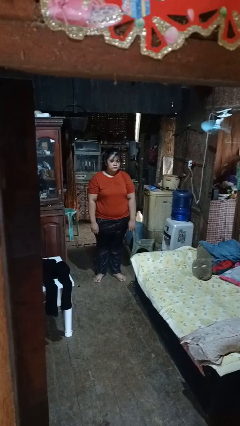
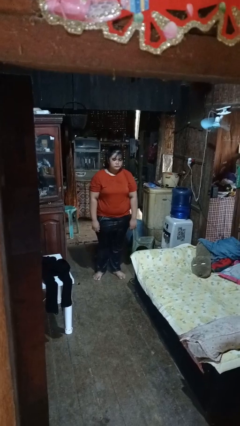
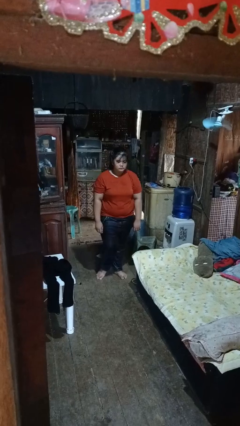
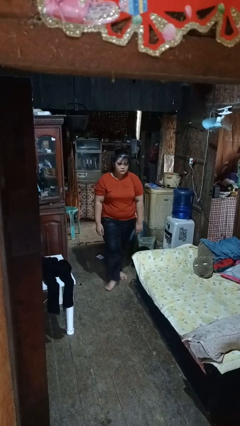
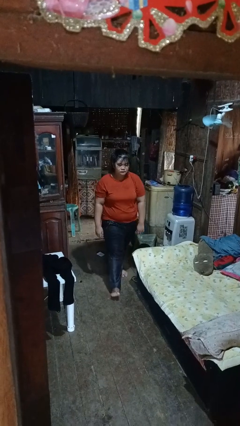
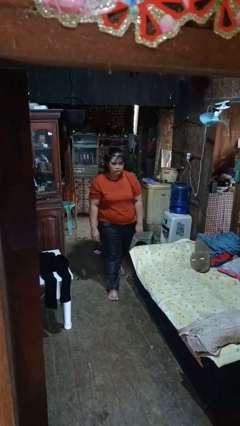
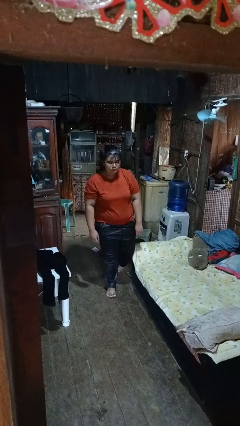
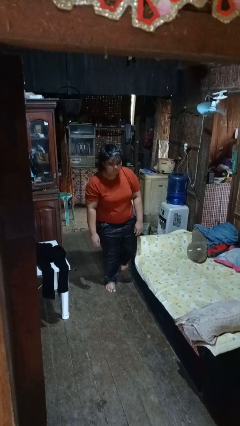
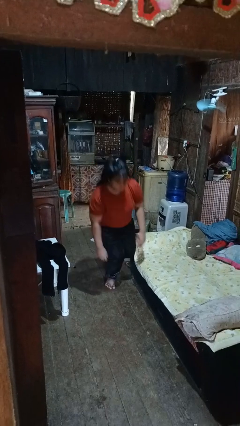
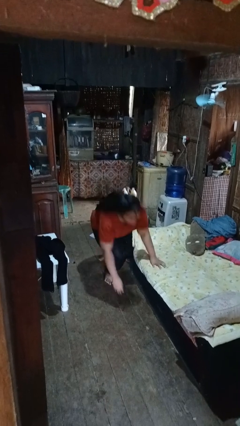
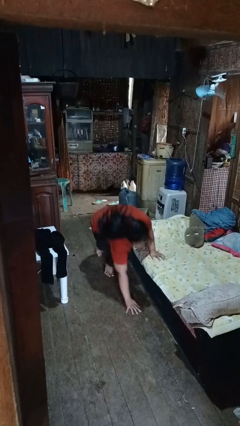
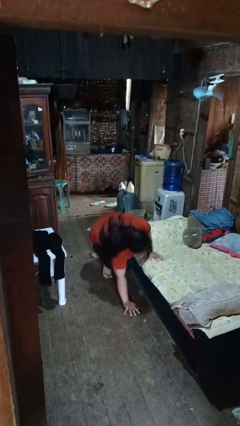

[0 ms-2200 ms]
person trips on object on floor

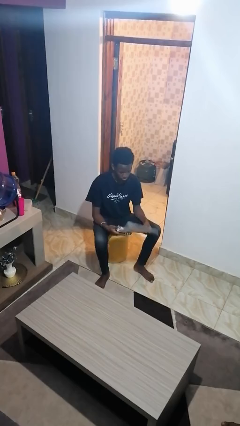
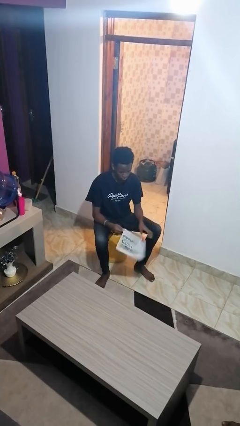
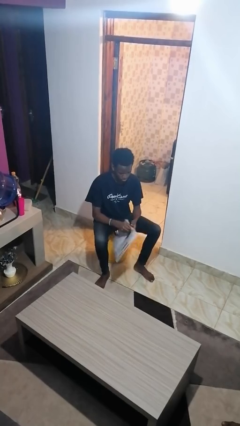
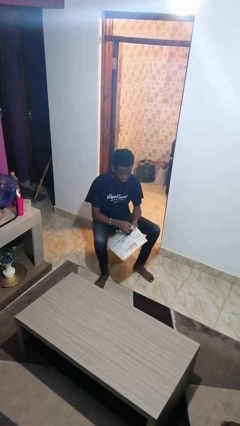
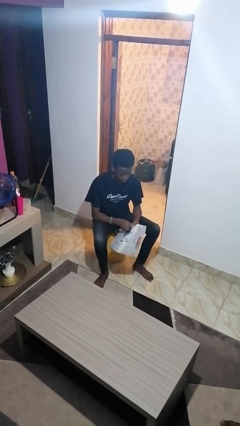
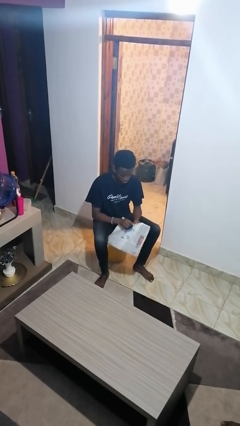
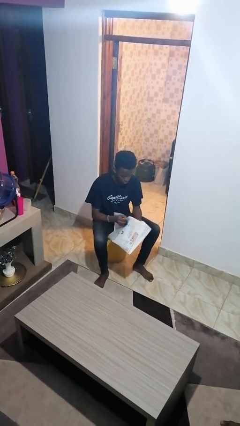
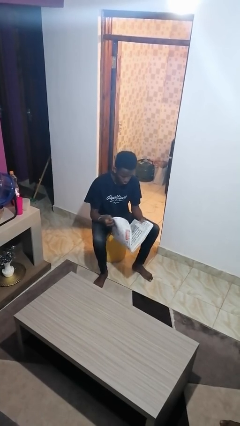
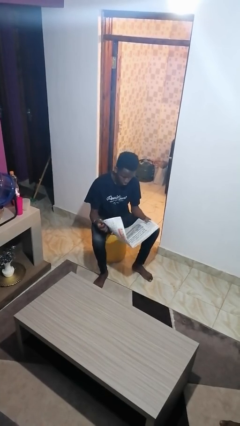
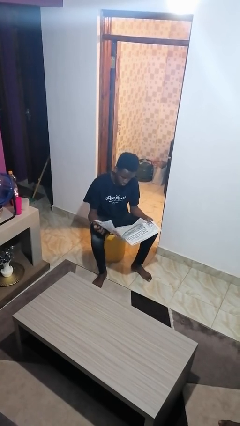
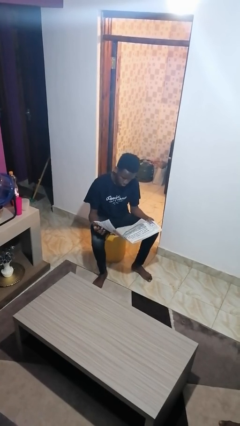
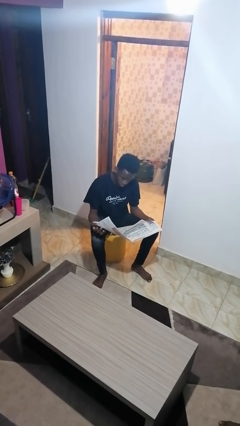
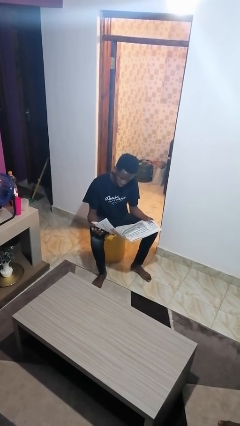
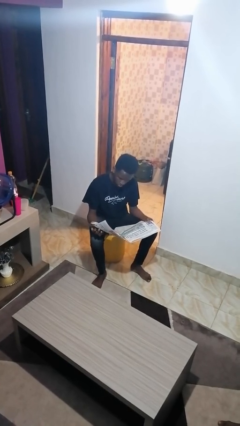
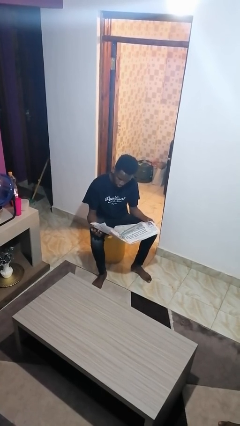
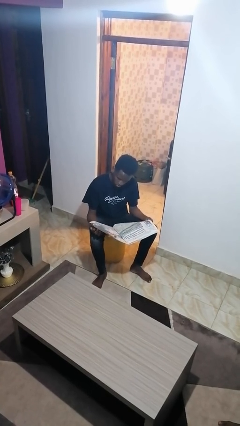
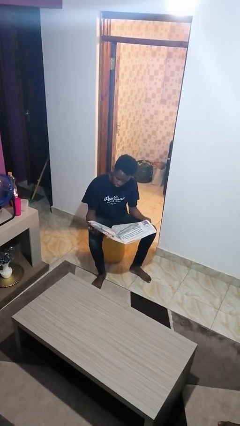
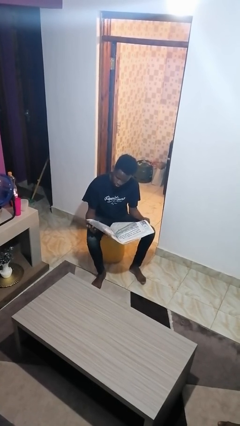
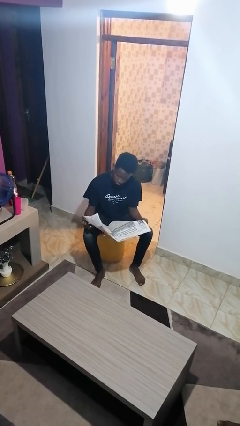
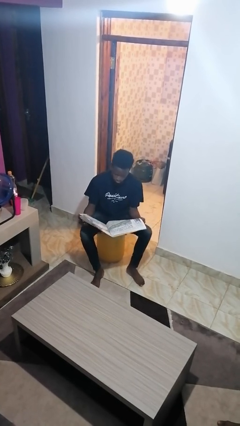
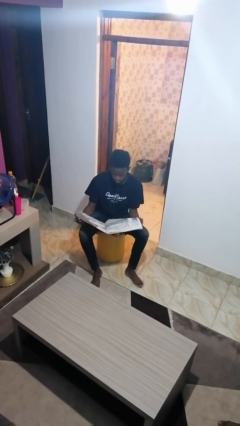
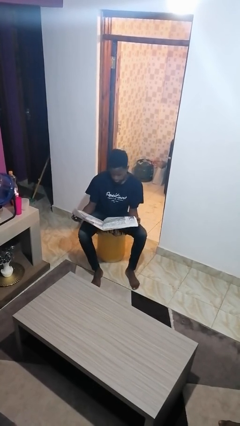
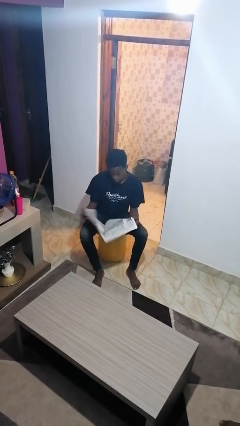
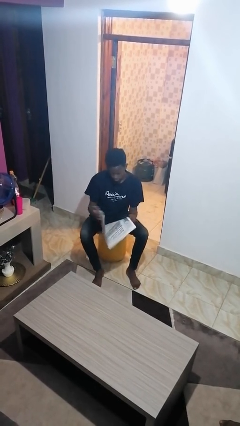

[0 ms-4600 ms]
person reads newspaper

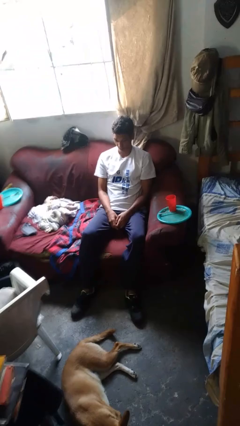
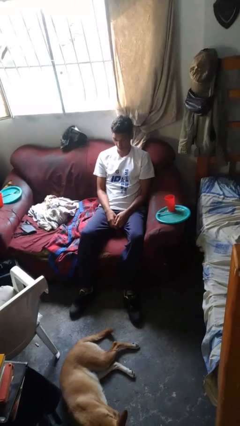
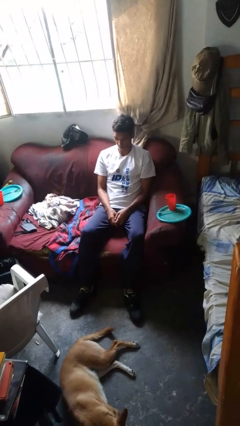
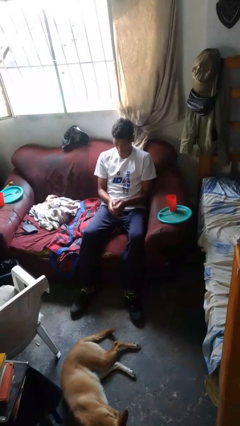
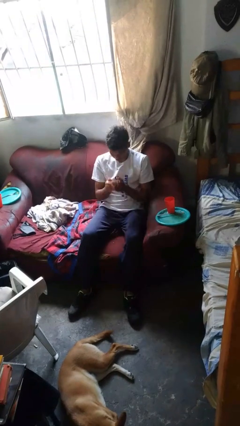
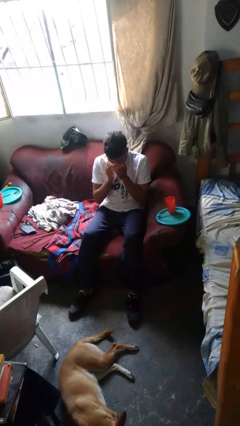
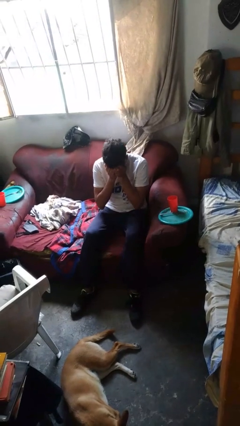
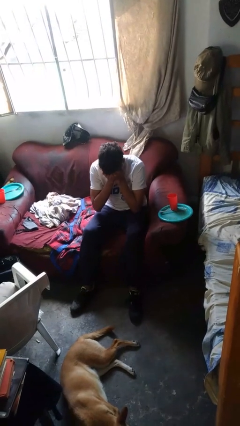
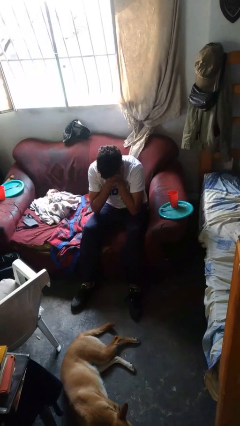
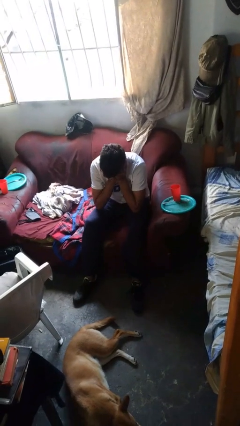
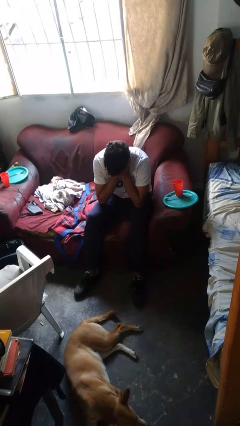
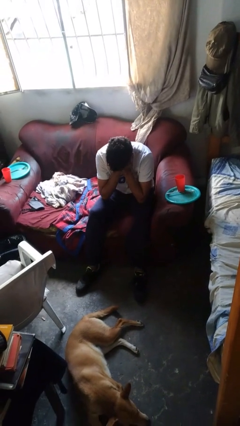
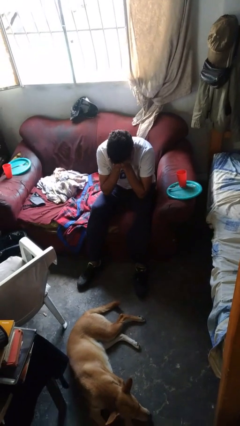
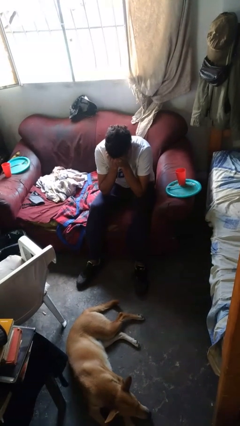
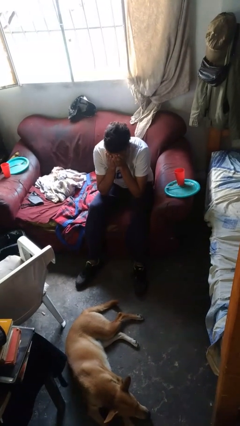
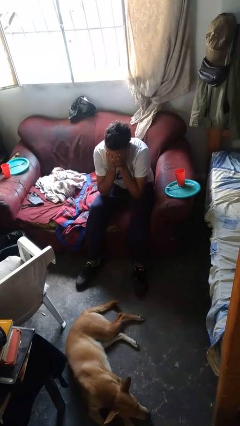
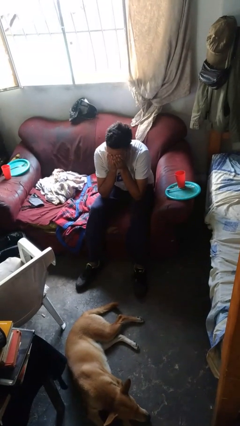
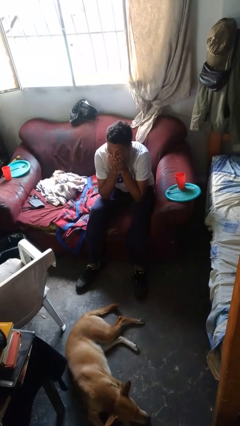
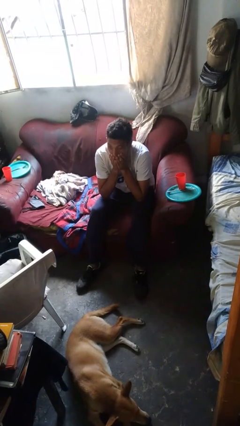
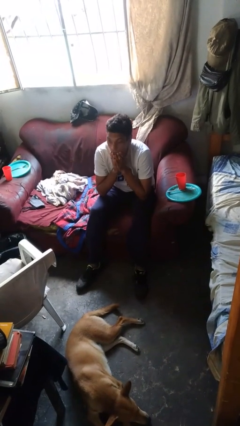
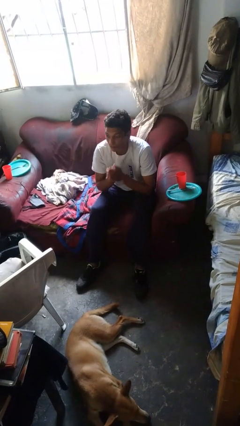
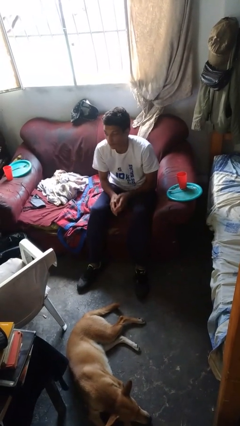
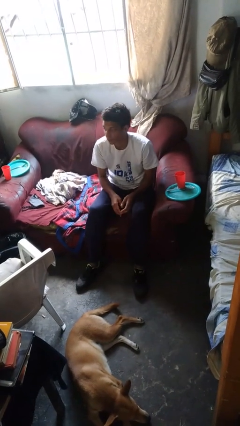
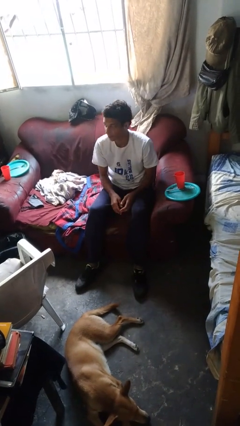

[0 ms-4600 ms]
person covers face with hands

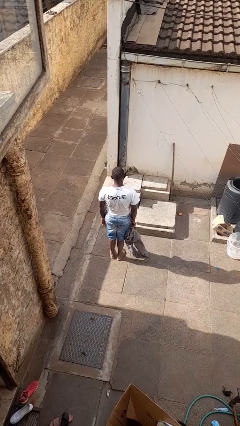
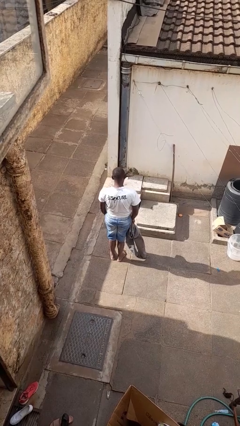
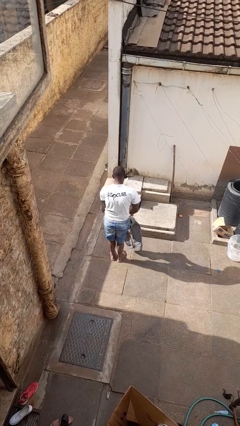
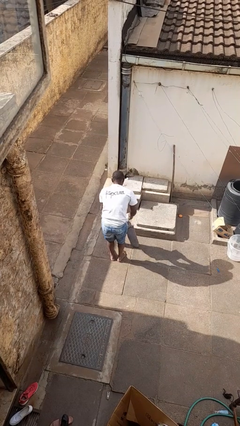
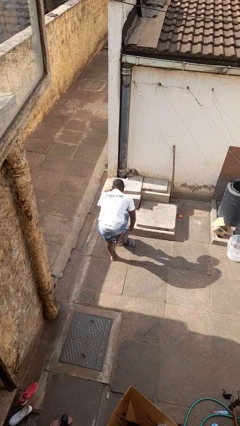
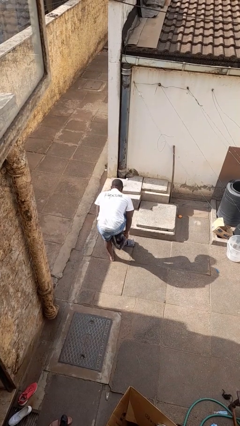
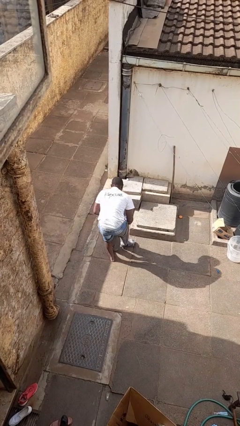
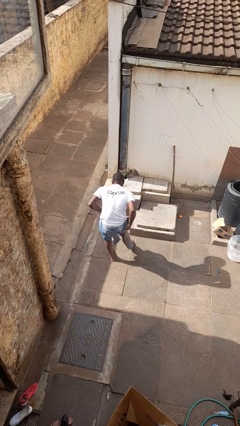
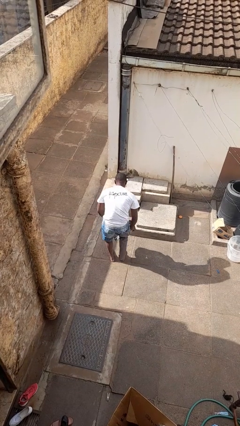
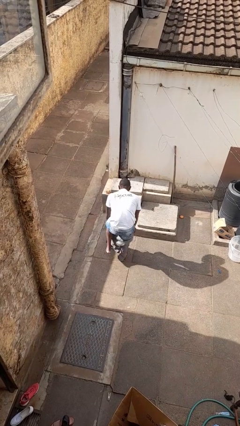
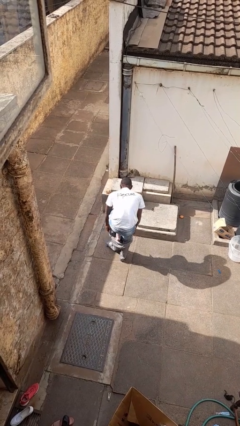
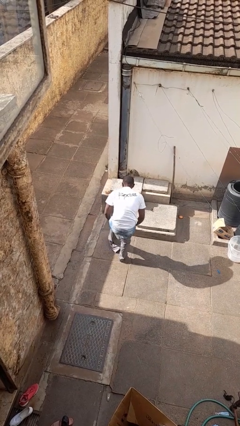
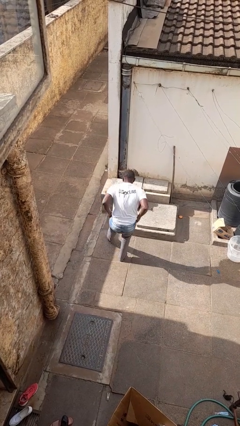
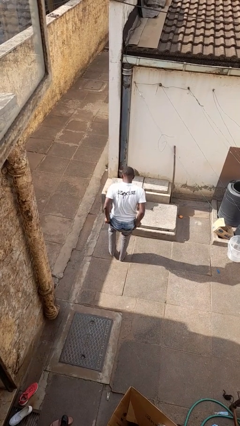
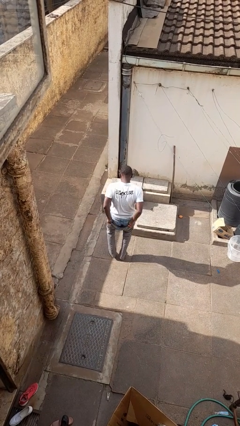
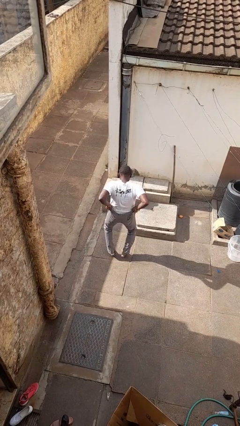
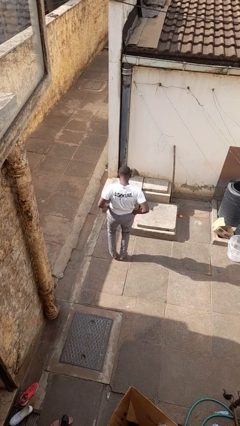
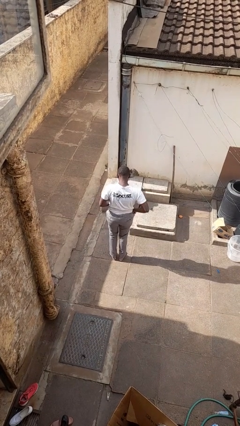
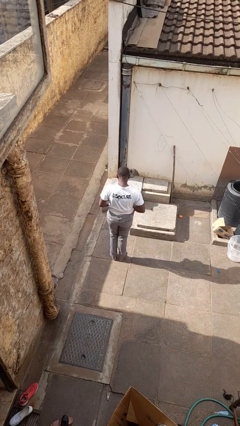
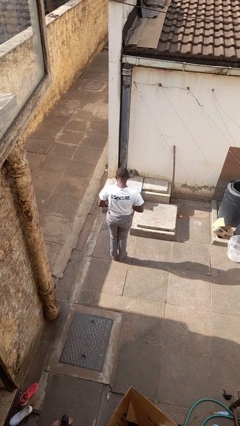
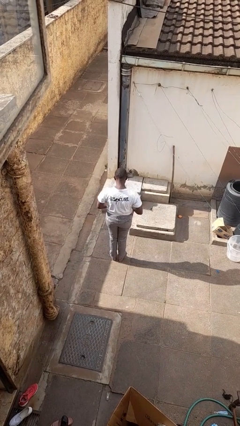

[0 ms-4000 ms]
person puts on pants

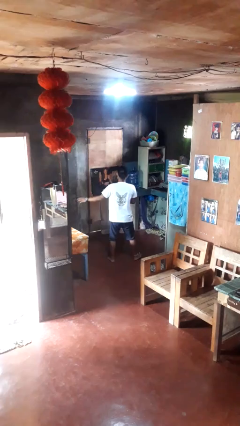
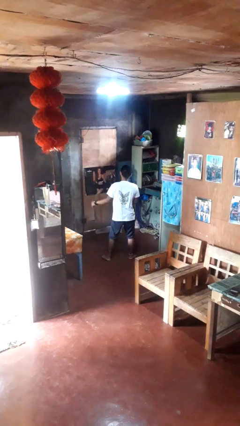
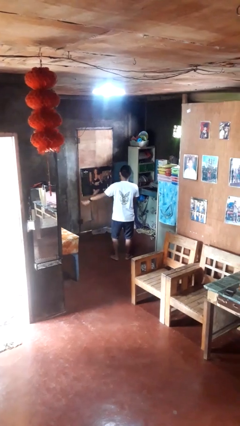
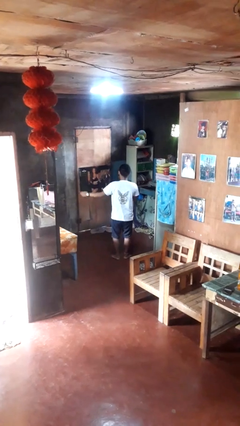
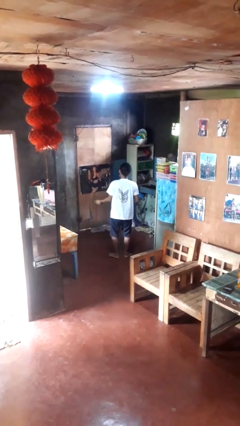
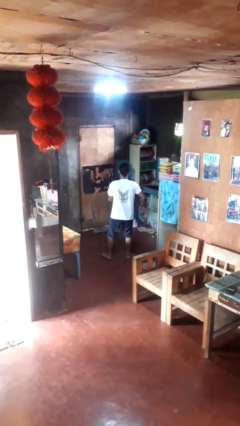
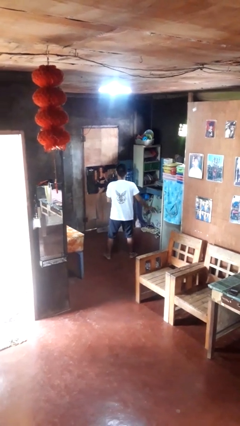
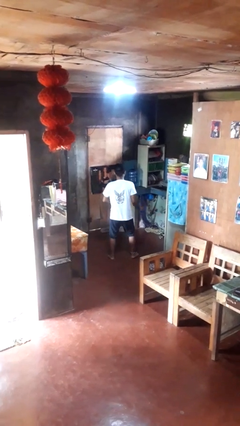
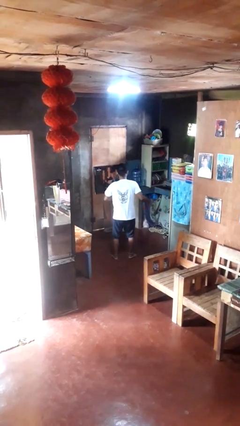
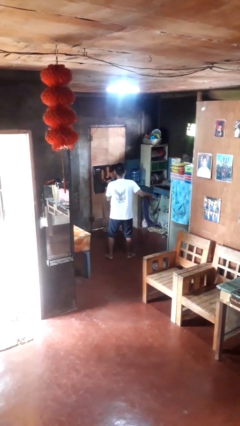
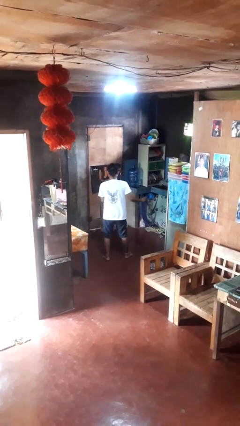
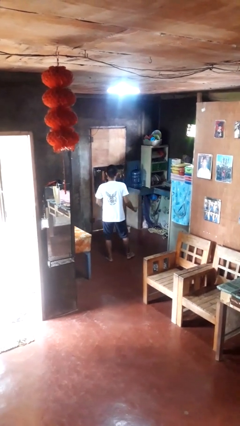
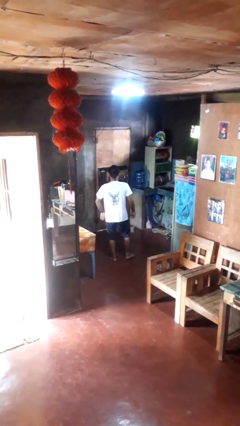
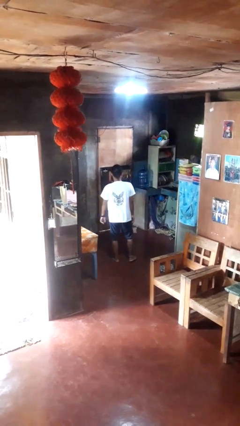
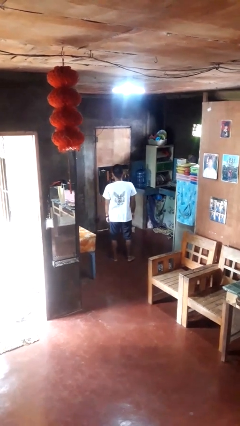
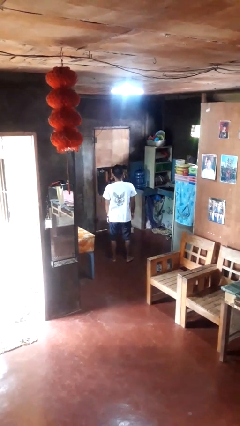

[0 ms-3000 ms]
person dances in place
